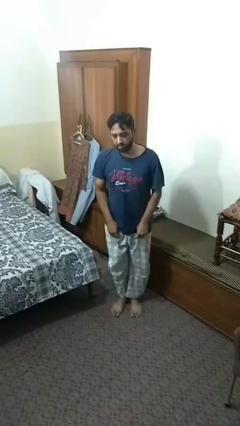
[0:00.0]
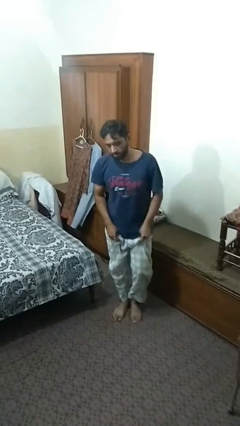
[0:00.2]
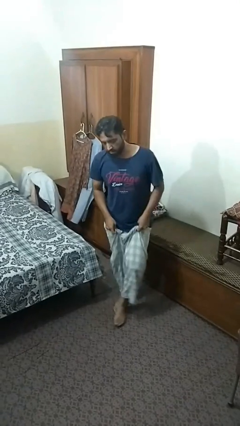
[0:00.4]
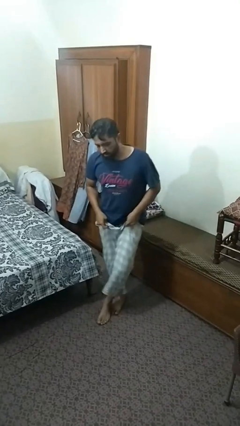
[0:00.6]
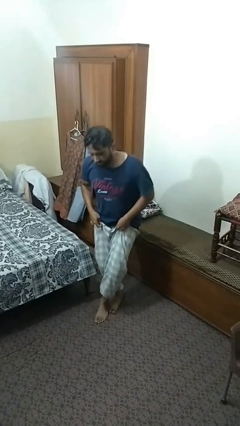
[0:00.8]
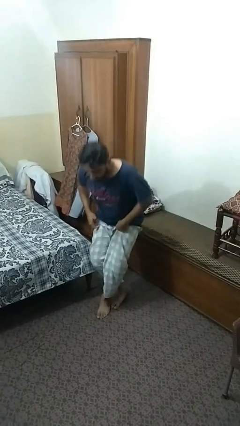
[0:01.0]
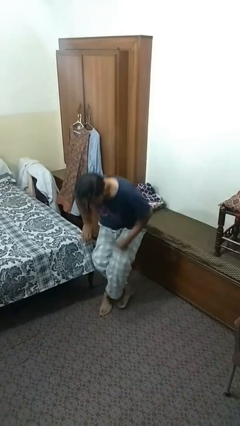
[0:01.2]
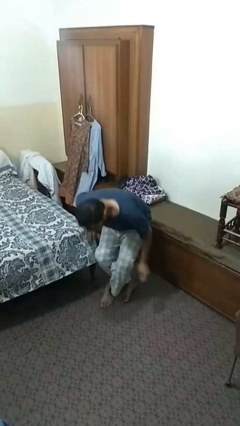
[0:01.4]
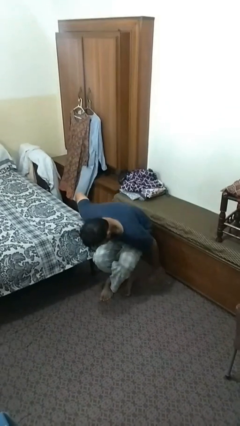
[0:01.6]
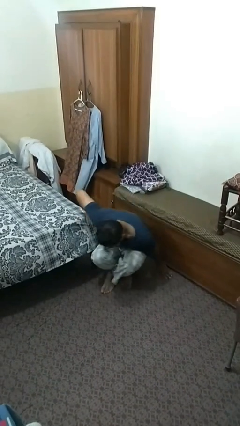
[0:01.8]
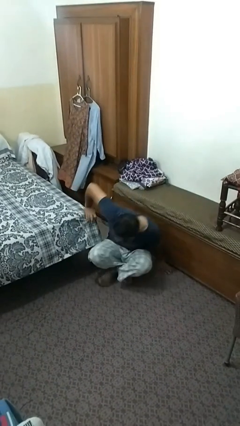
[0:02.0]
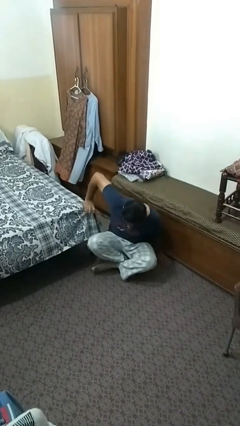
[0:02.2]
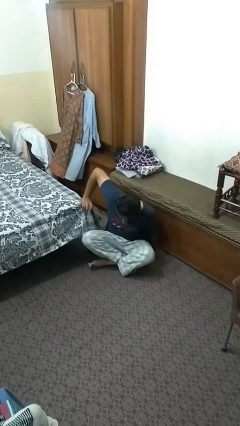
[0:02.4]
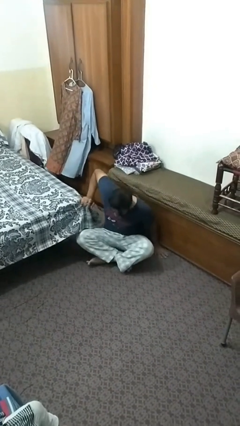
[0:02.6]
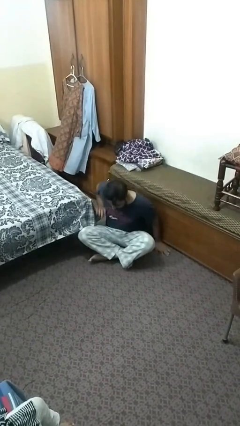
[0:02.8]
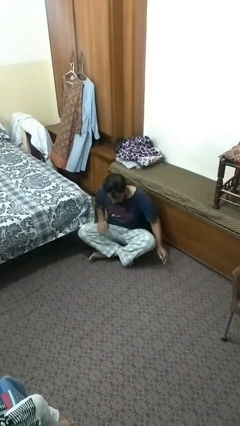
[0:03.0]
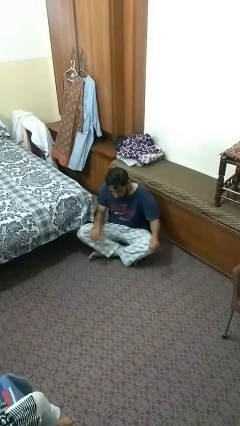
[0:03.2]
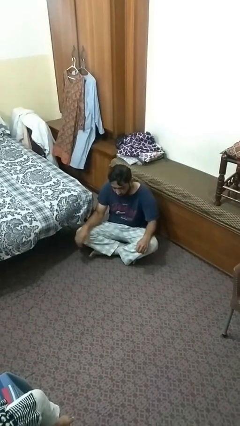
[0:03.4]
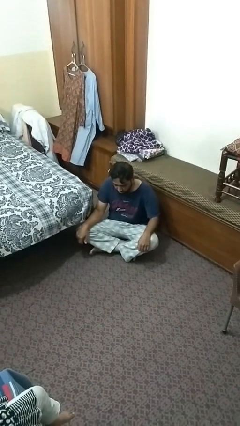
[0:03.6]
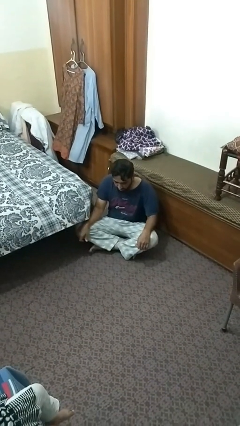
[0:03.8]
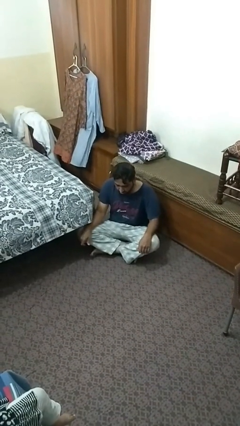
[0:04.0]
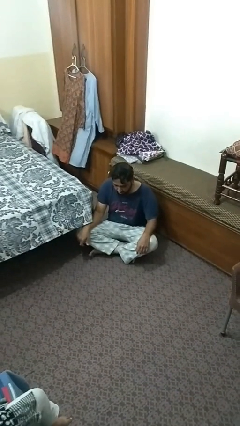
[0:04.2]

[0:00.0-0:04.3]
person sits crisscross

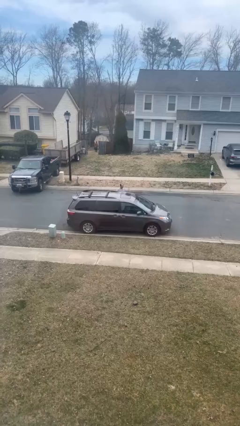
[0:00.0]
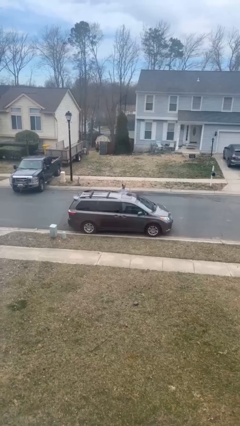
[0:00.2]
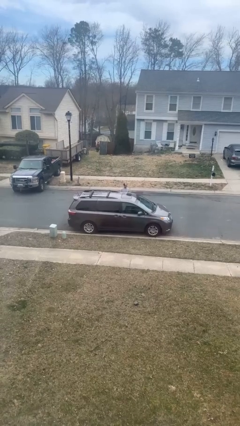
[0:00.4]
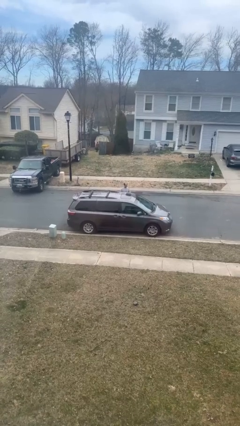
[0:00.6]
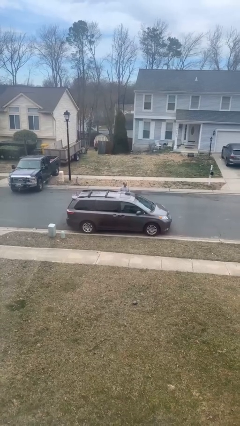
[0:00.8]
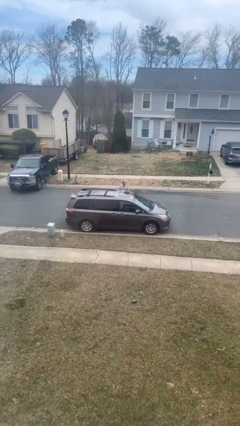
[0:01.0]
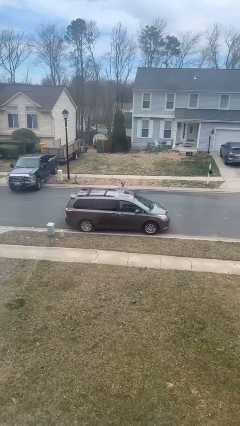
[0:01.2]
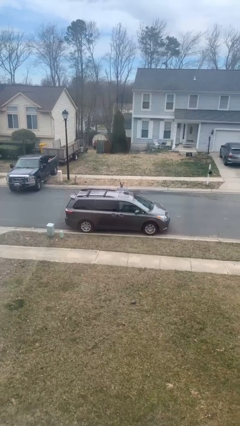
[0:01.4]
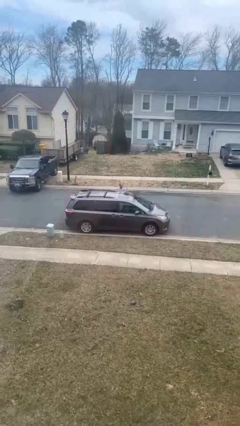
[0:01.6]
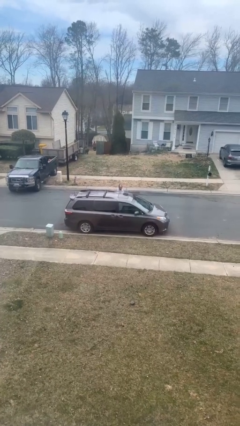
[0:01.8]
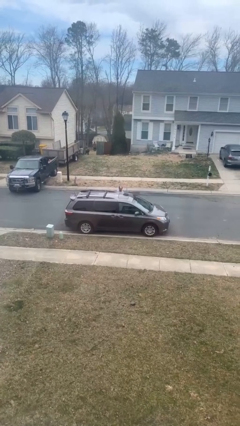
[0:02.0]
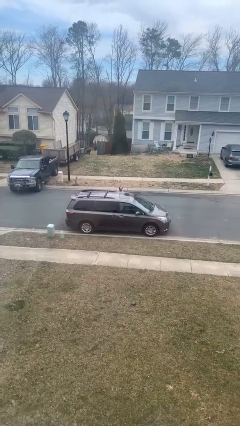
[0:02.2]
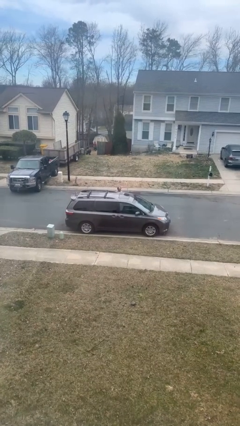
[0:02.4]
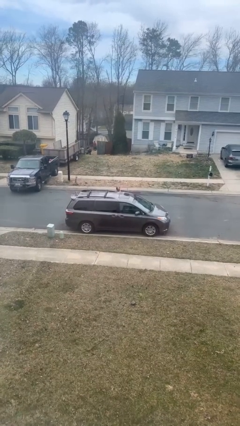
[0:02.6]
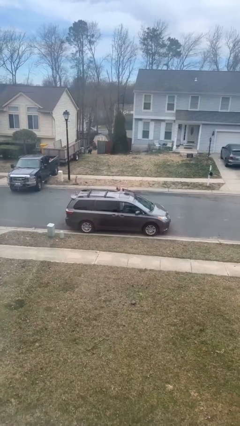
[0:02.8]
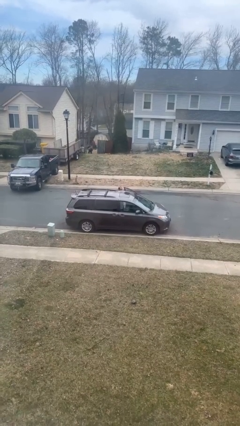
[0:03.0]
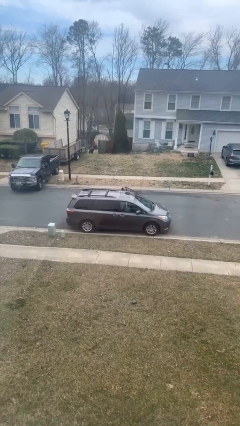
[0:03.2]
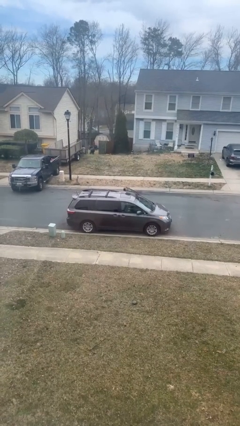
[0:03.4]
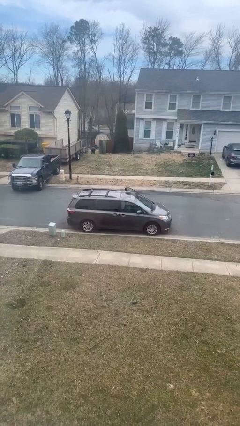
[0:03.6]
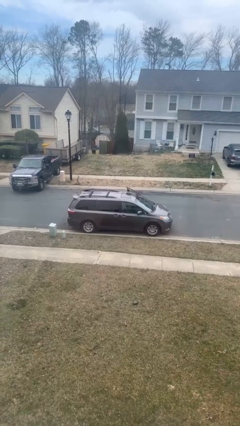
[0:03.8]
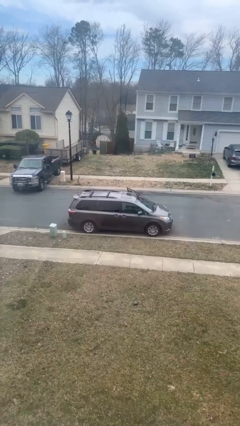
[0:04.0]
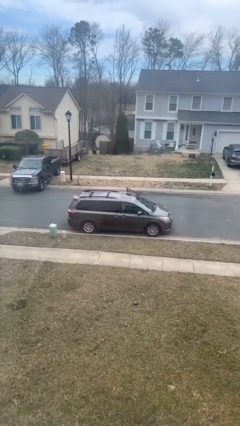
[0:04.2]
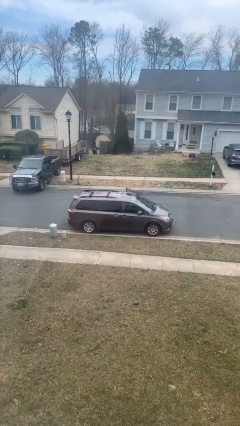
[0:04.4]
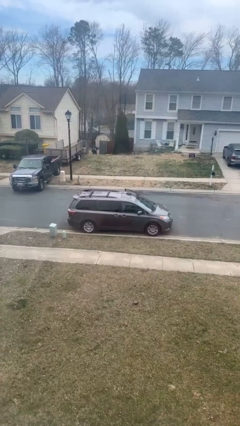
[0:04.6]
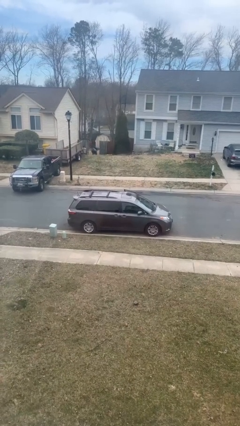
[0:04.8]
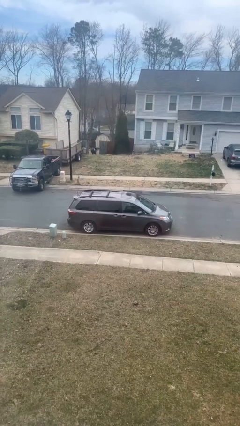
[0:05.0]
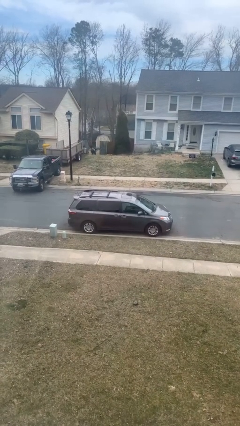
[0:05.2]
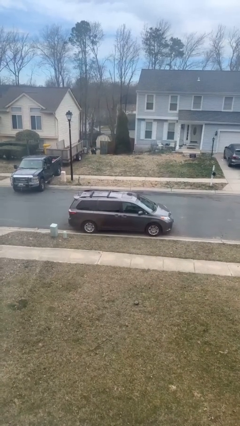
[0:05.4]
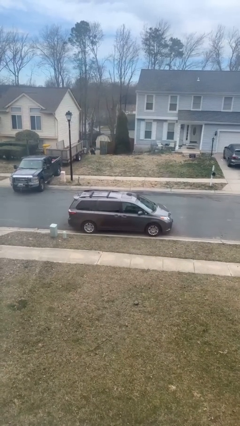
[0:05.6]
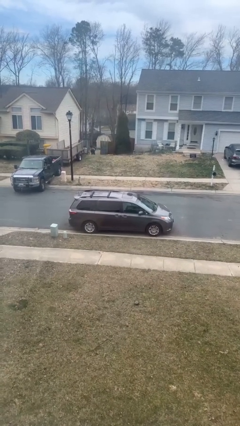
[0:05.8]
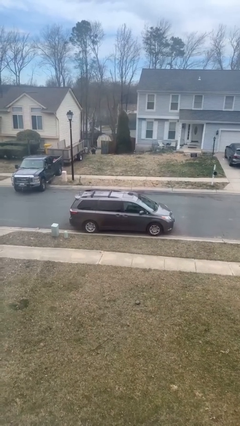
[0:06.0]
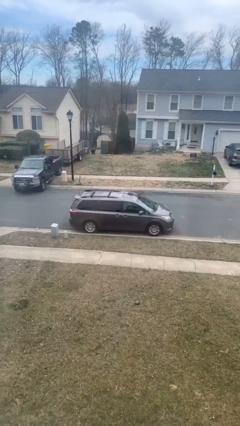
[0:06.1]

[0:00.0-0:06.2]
car picks up person

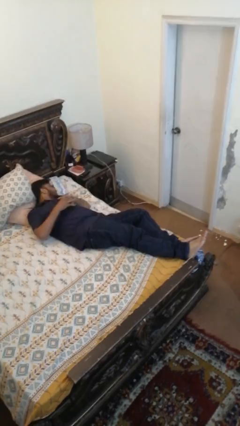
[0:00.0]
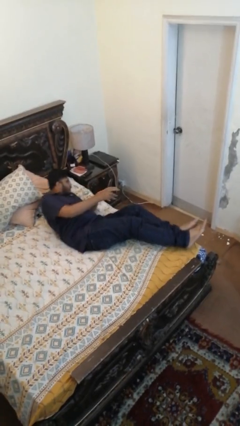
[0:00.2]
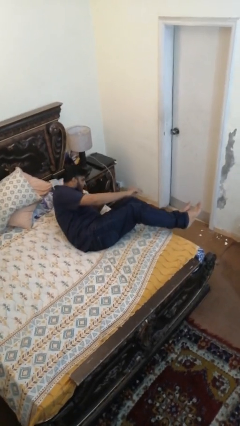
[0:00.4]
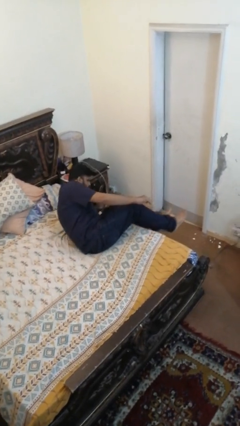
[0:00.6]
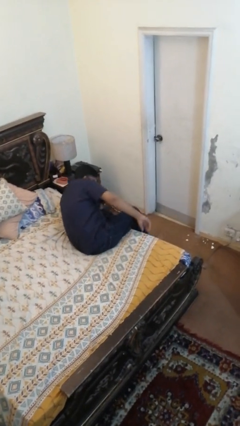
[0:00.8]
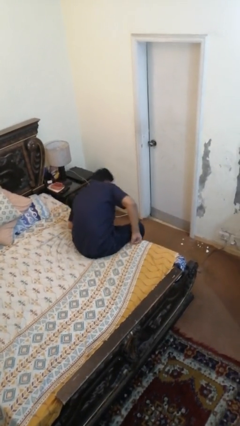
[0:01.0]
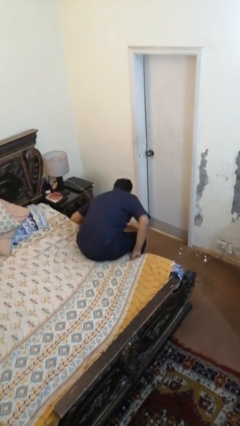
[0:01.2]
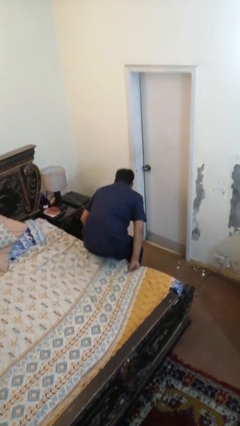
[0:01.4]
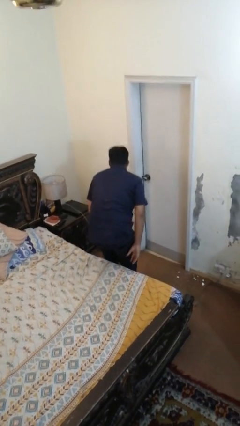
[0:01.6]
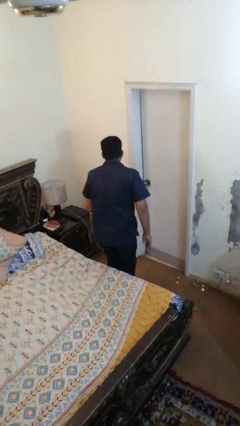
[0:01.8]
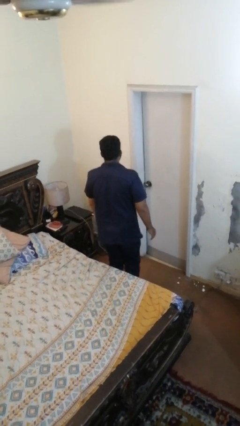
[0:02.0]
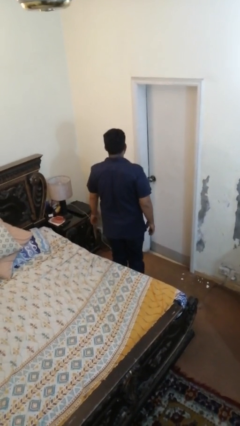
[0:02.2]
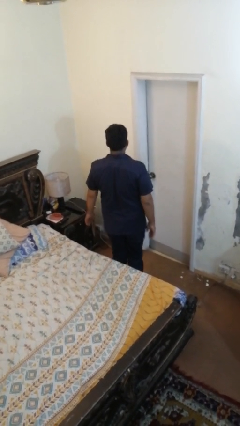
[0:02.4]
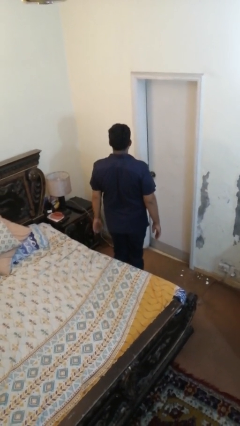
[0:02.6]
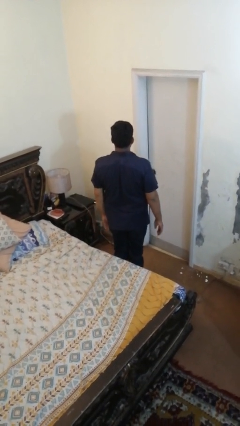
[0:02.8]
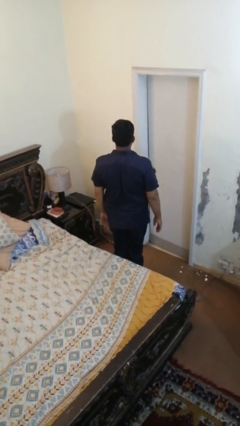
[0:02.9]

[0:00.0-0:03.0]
person stands up

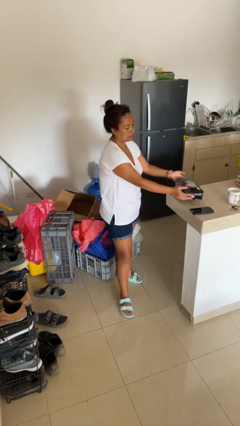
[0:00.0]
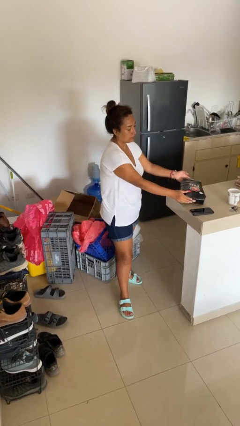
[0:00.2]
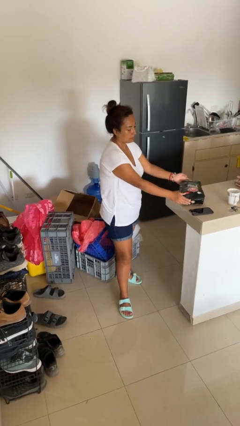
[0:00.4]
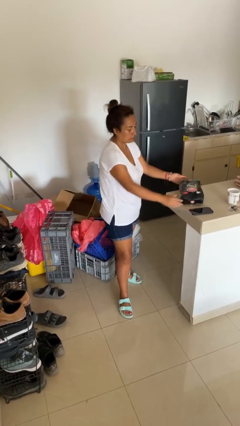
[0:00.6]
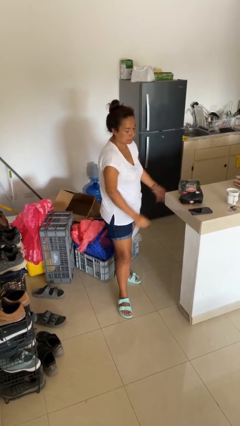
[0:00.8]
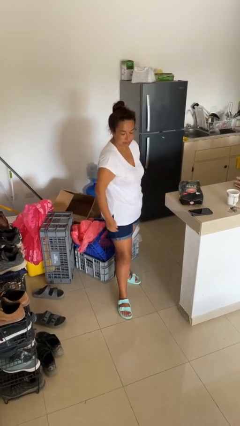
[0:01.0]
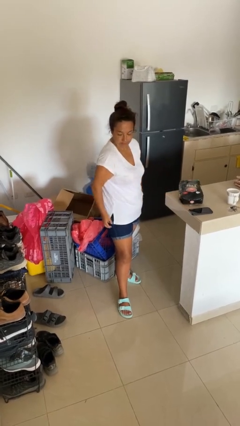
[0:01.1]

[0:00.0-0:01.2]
person puts down object on countertop

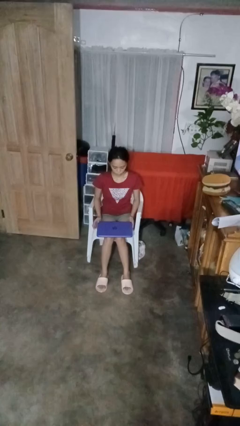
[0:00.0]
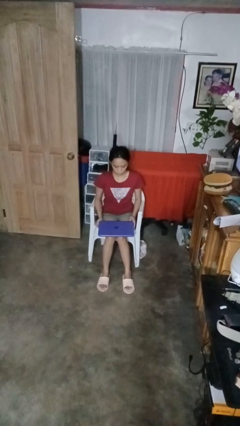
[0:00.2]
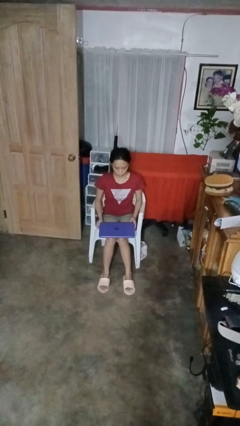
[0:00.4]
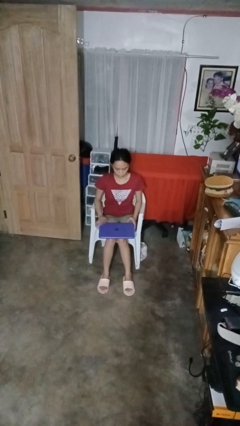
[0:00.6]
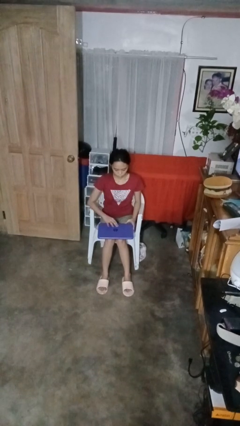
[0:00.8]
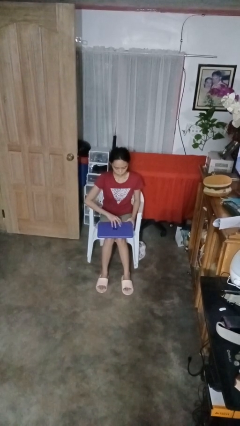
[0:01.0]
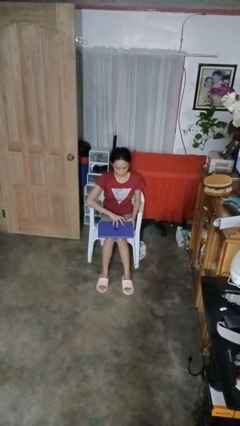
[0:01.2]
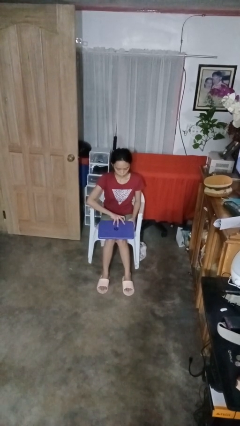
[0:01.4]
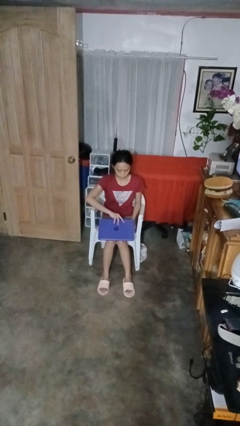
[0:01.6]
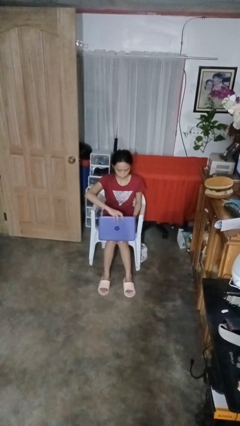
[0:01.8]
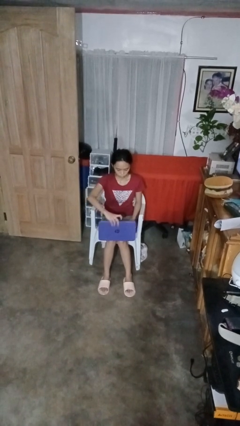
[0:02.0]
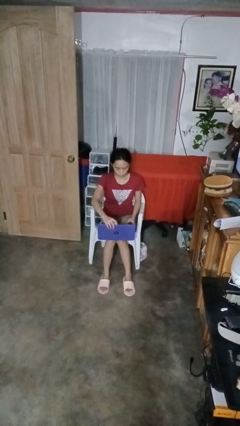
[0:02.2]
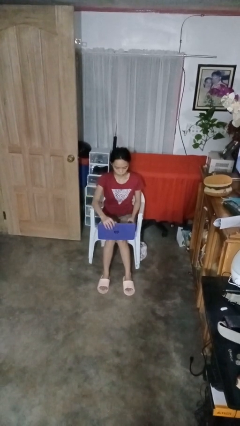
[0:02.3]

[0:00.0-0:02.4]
person opens laptop

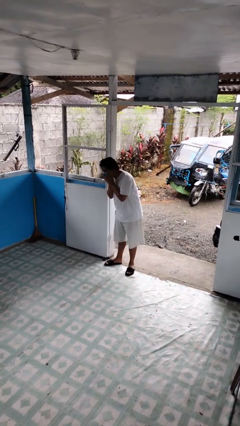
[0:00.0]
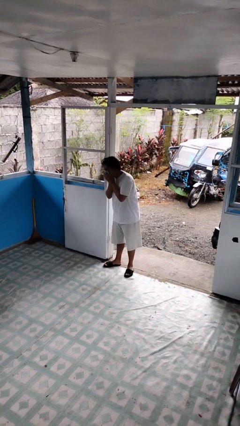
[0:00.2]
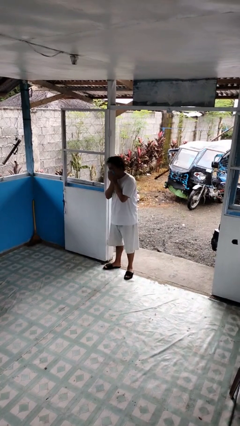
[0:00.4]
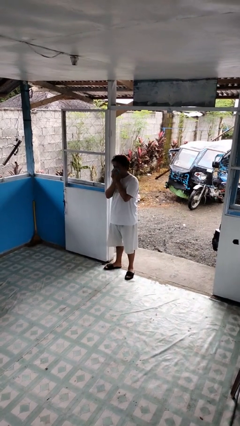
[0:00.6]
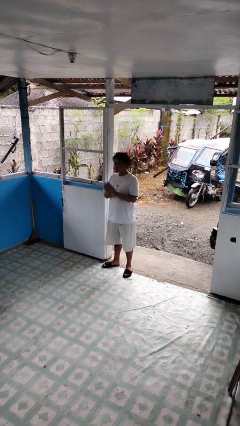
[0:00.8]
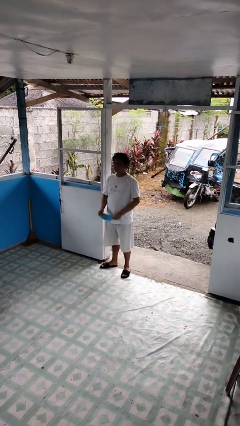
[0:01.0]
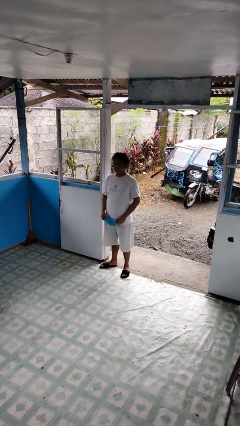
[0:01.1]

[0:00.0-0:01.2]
person blows nose
